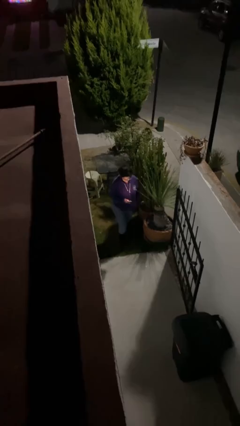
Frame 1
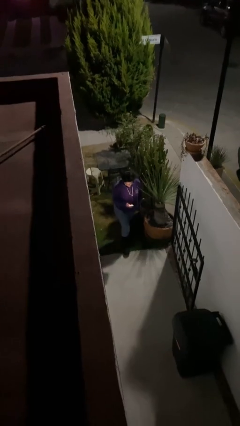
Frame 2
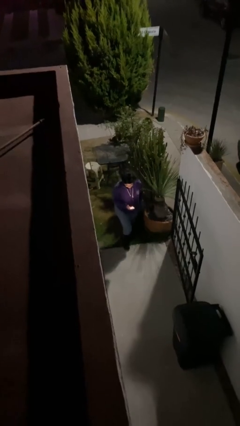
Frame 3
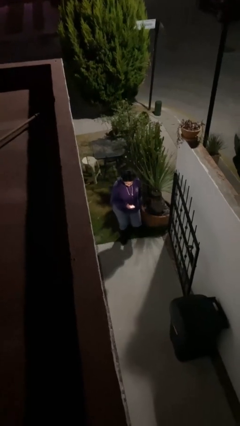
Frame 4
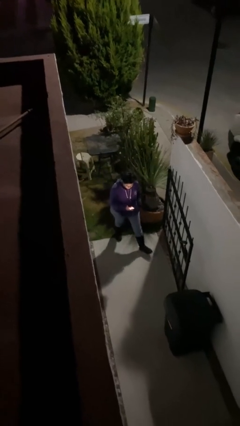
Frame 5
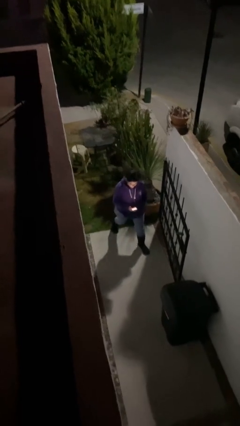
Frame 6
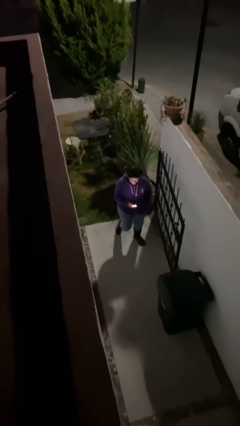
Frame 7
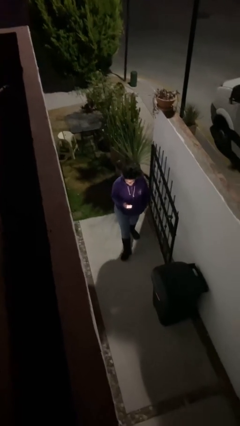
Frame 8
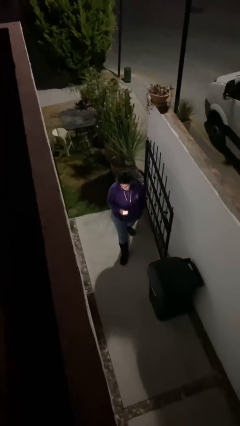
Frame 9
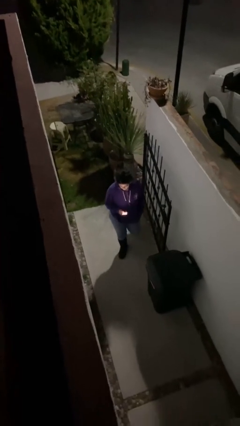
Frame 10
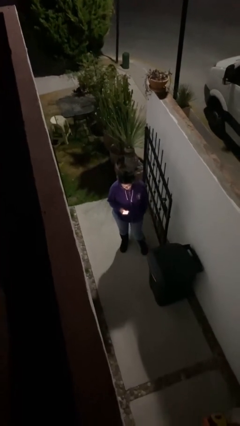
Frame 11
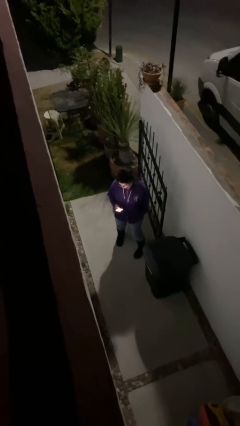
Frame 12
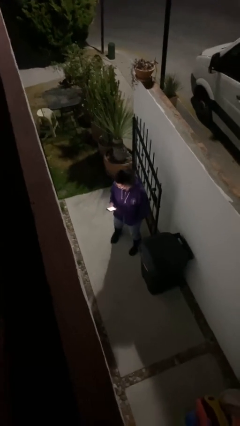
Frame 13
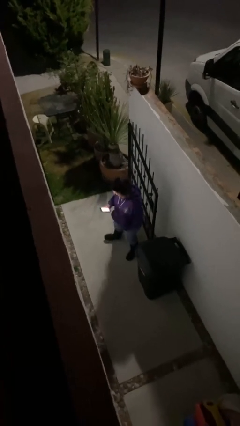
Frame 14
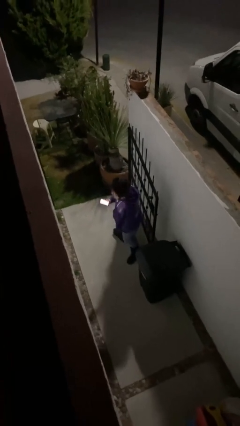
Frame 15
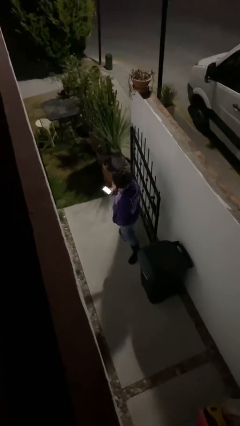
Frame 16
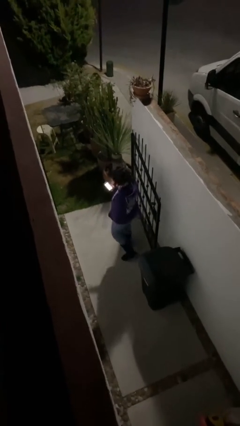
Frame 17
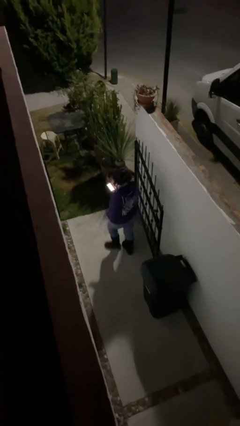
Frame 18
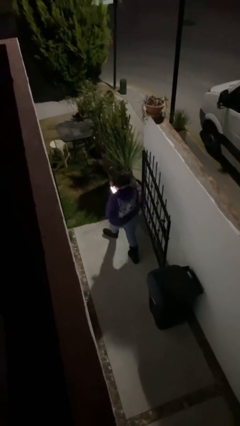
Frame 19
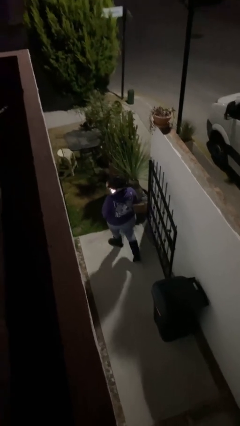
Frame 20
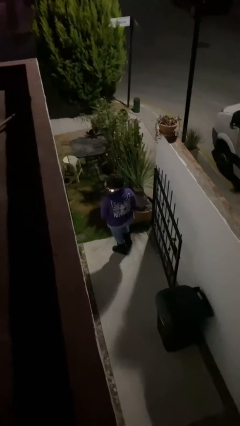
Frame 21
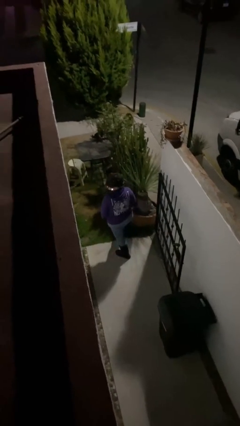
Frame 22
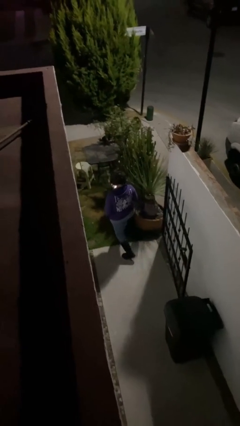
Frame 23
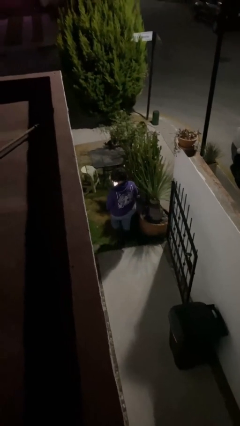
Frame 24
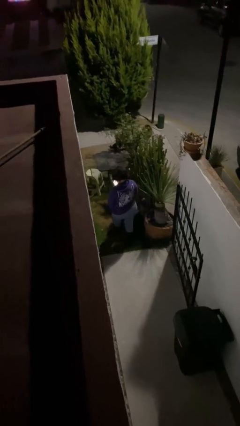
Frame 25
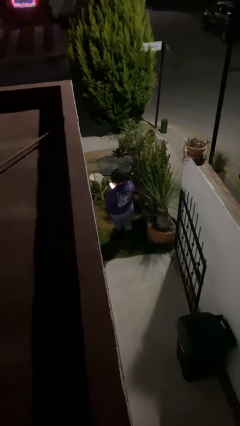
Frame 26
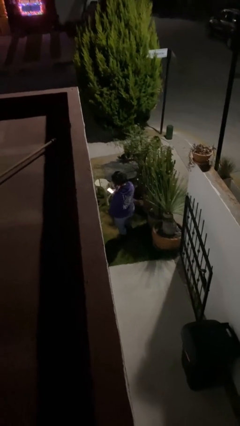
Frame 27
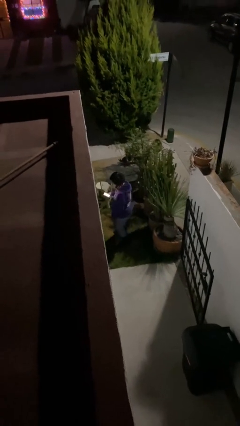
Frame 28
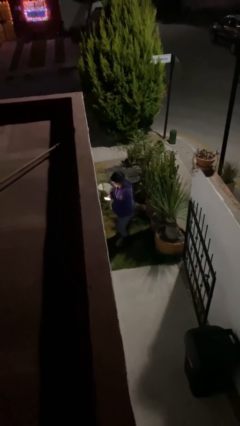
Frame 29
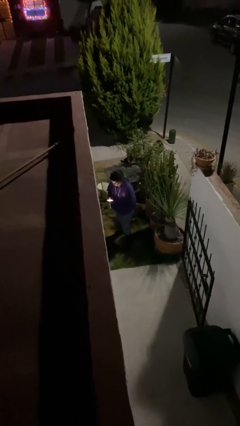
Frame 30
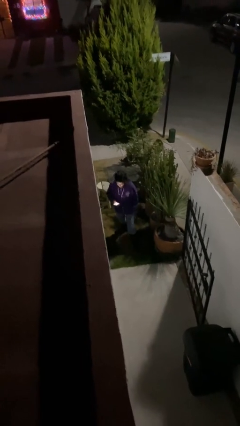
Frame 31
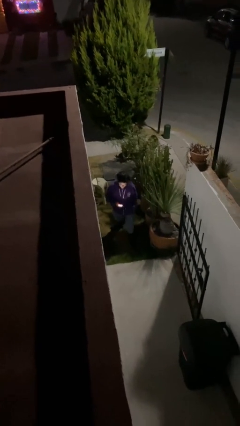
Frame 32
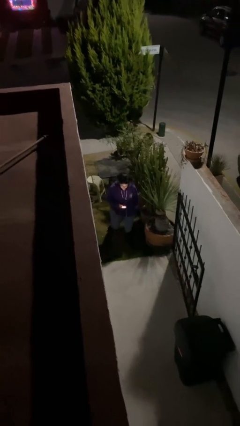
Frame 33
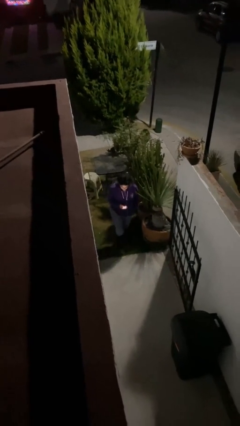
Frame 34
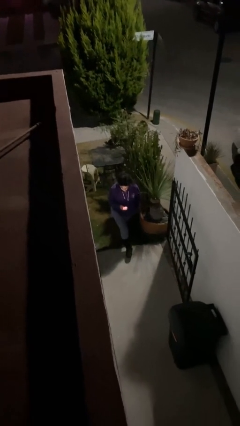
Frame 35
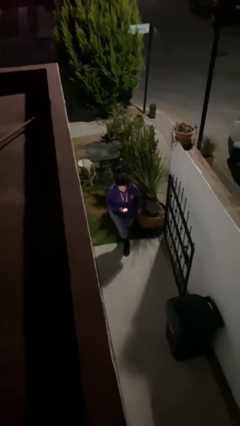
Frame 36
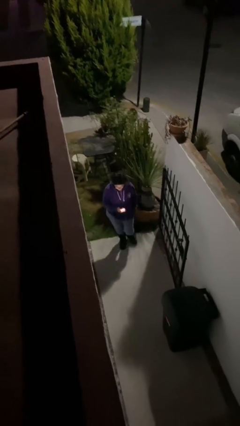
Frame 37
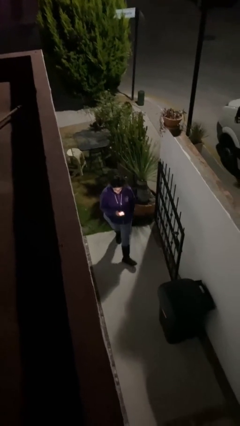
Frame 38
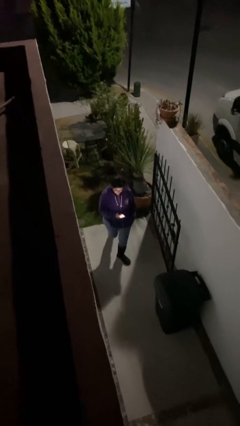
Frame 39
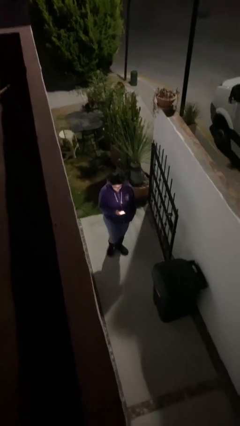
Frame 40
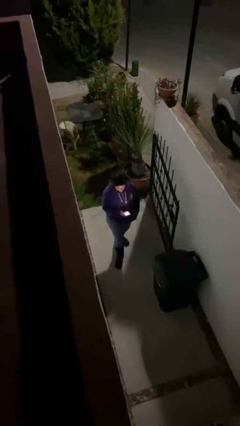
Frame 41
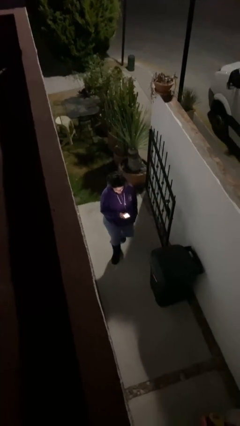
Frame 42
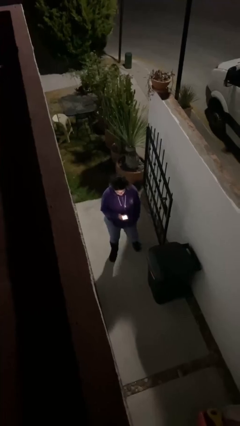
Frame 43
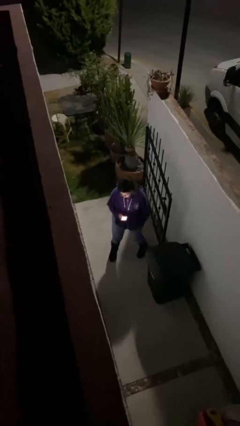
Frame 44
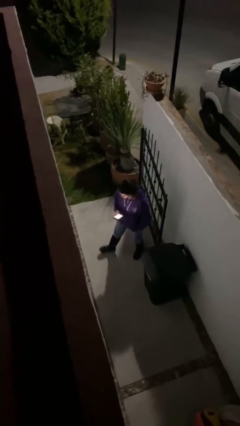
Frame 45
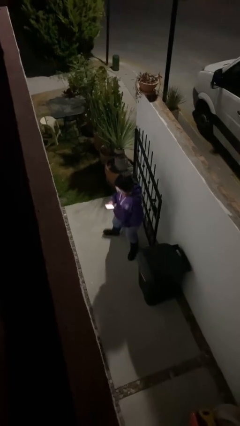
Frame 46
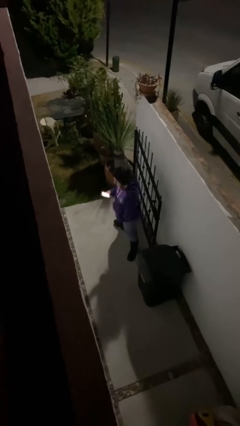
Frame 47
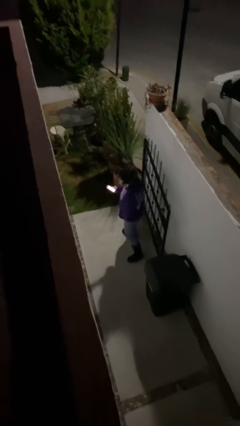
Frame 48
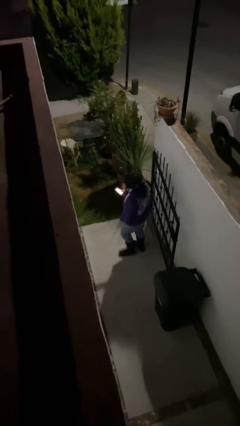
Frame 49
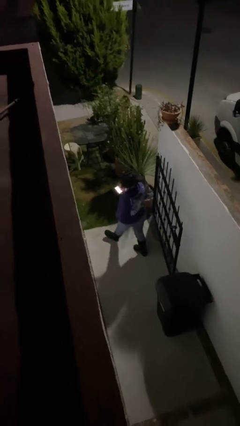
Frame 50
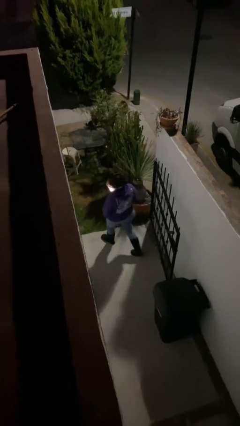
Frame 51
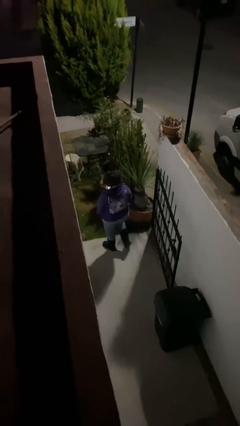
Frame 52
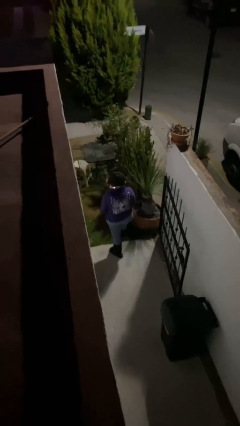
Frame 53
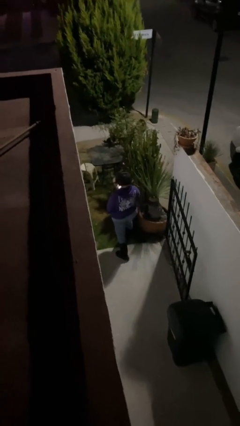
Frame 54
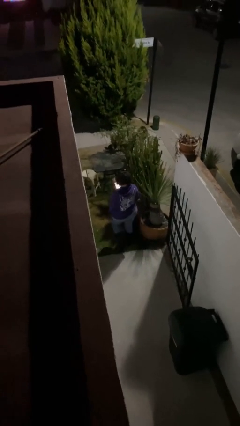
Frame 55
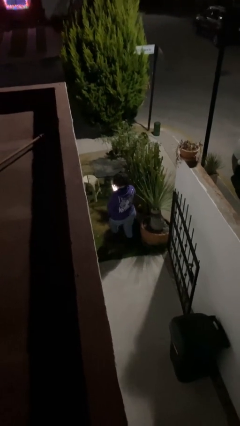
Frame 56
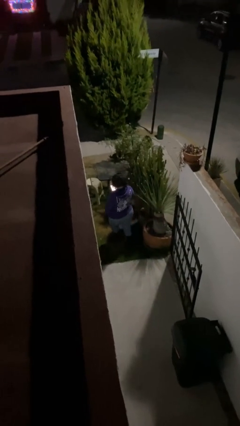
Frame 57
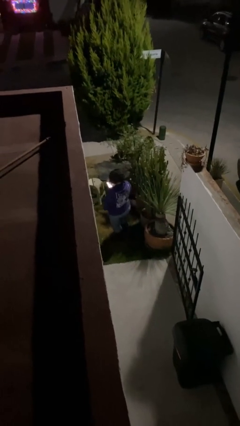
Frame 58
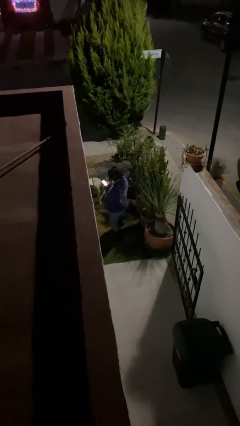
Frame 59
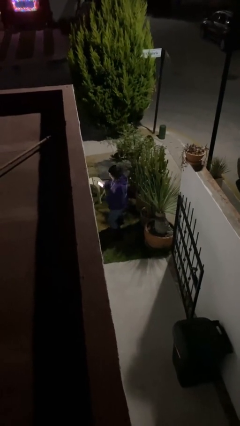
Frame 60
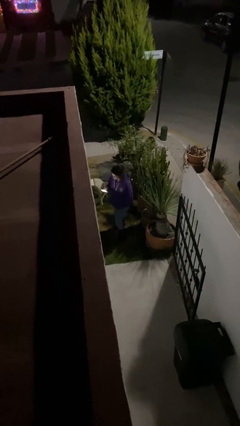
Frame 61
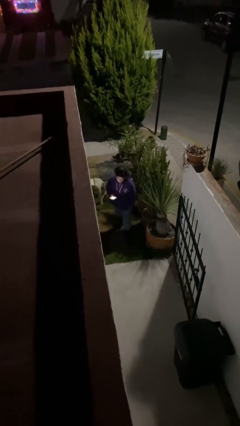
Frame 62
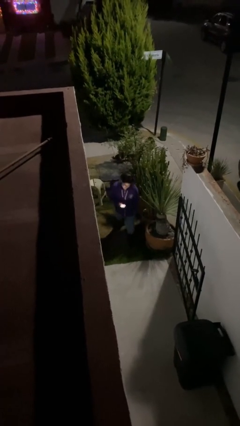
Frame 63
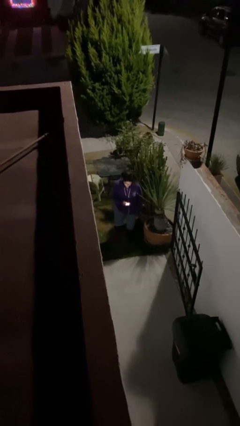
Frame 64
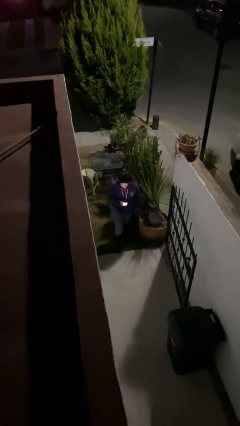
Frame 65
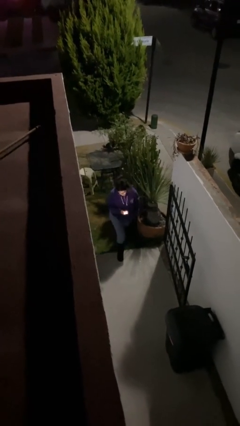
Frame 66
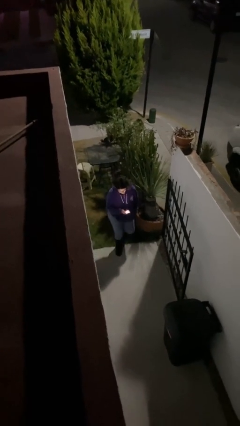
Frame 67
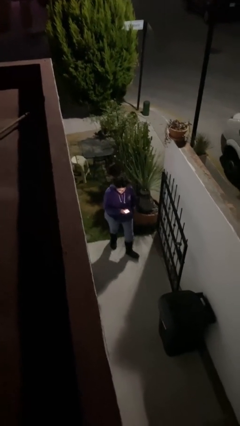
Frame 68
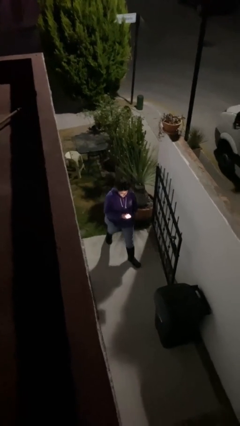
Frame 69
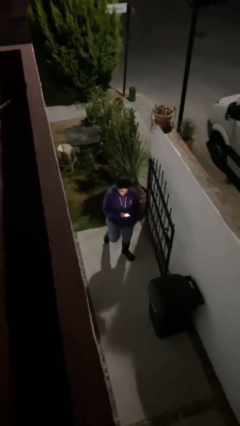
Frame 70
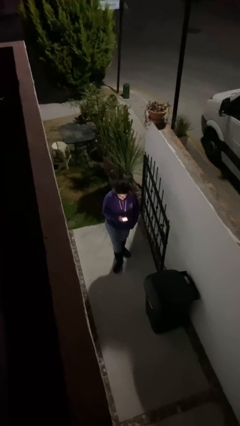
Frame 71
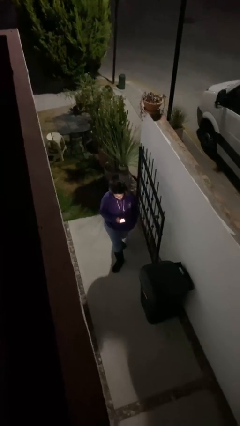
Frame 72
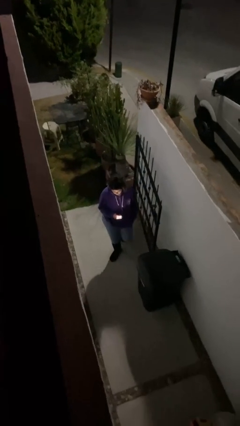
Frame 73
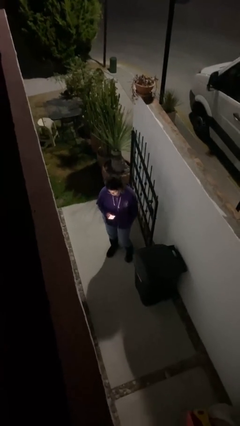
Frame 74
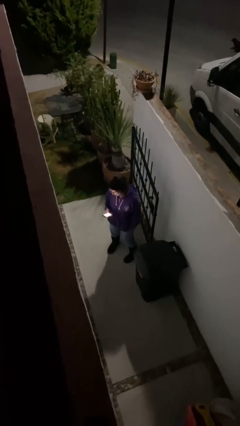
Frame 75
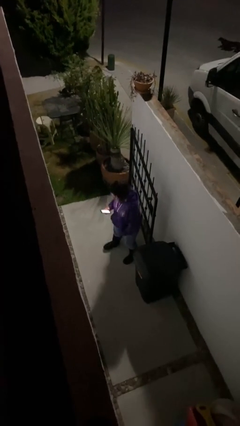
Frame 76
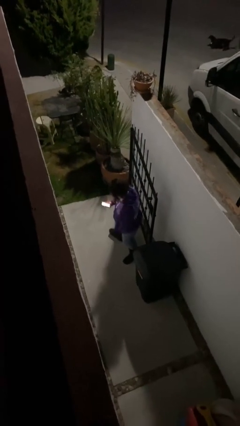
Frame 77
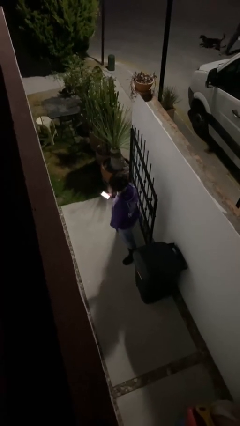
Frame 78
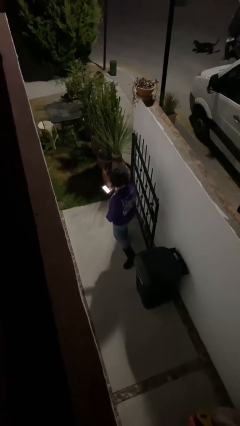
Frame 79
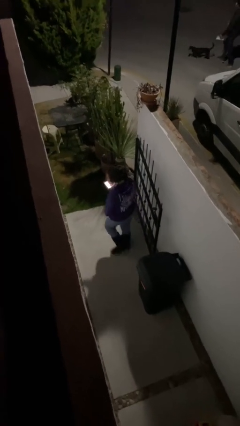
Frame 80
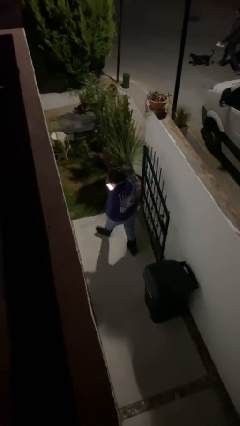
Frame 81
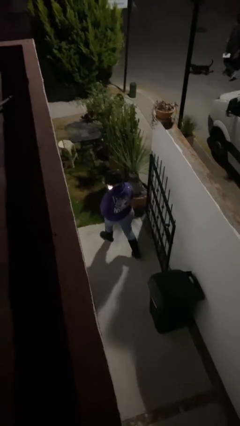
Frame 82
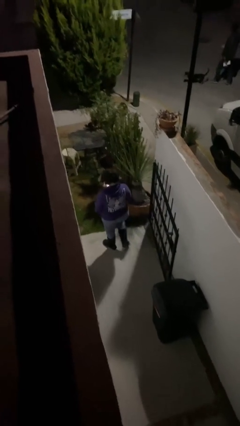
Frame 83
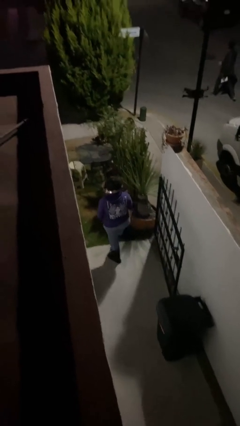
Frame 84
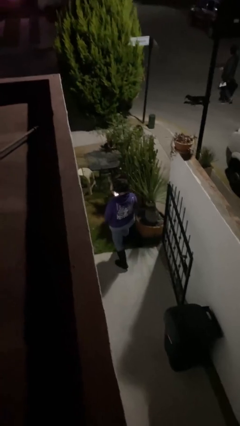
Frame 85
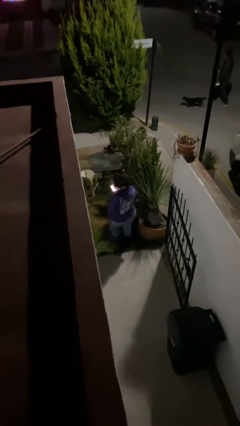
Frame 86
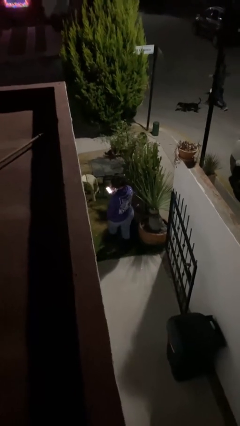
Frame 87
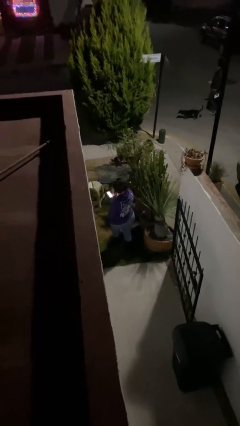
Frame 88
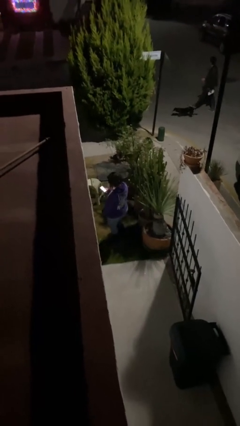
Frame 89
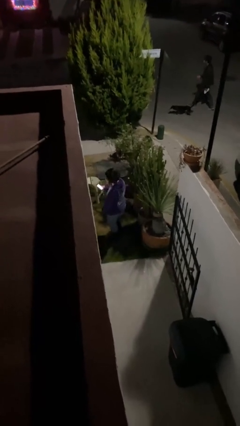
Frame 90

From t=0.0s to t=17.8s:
person texts on phone

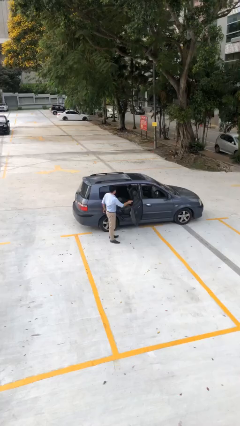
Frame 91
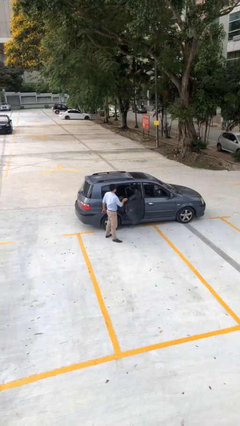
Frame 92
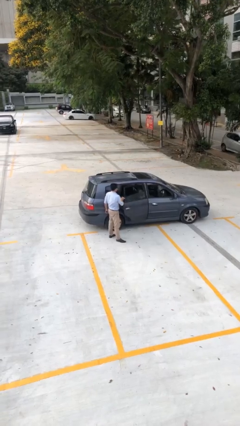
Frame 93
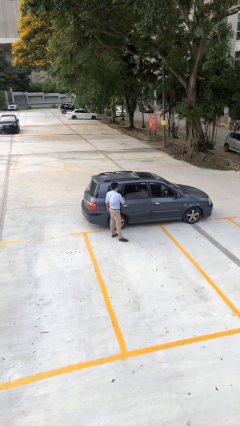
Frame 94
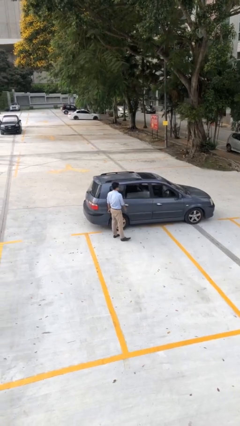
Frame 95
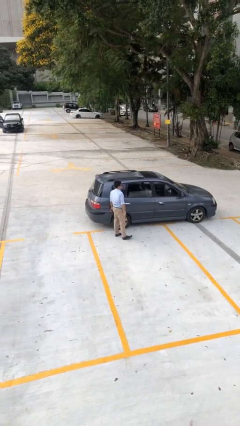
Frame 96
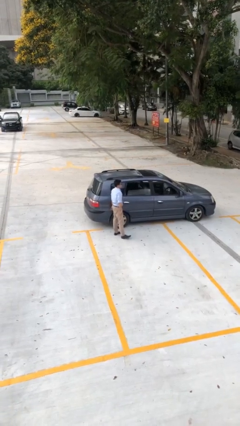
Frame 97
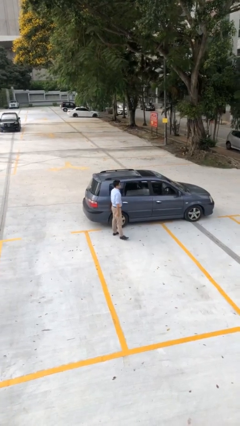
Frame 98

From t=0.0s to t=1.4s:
person closes car door
